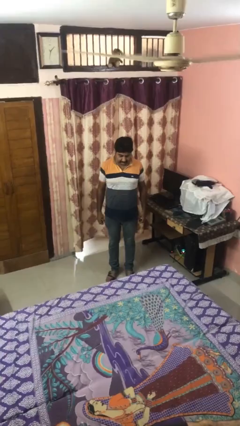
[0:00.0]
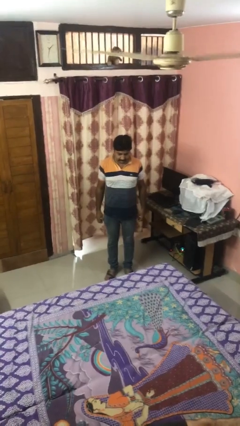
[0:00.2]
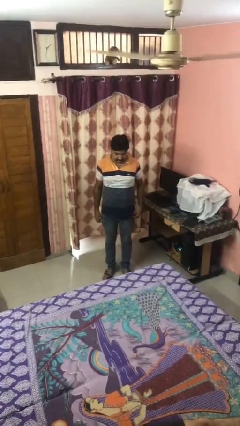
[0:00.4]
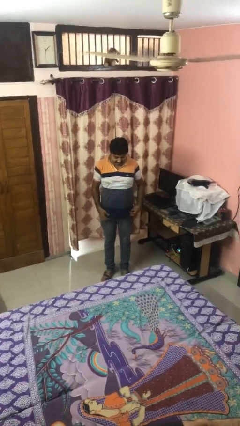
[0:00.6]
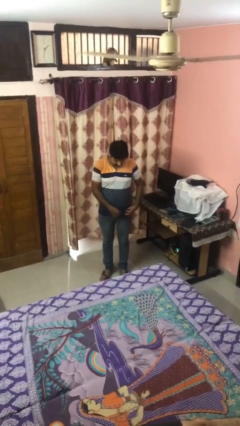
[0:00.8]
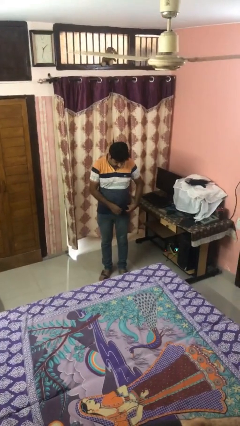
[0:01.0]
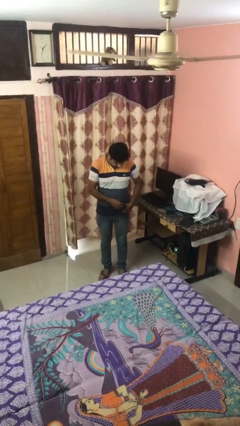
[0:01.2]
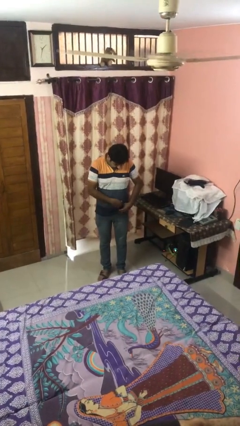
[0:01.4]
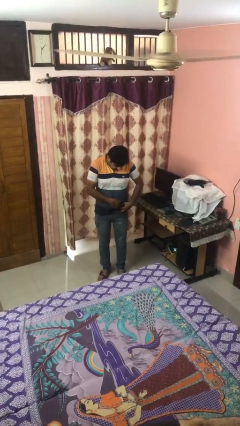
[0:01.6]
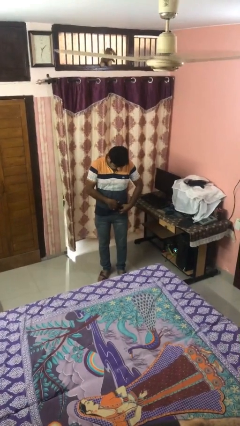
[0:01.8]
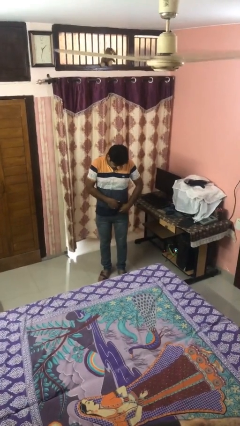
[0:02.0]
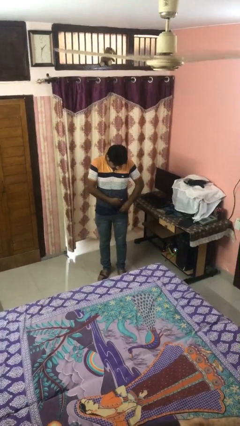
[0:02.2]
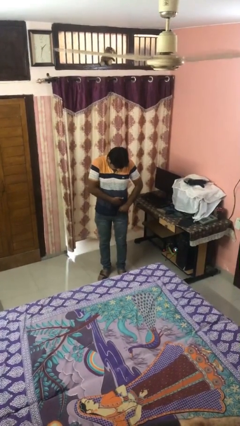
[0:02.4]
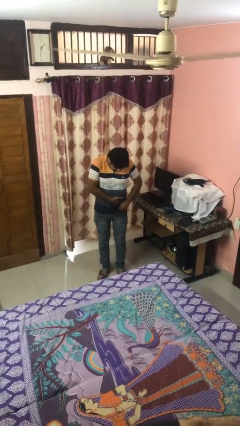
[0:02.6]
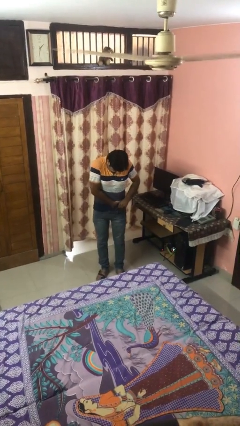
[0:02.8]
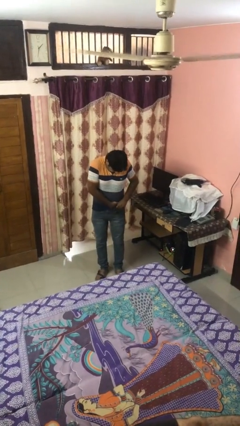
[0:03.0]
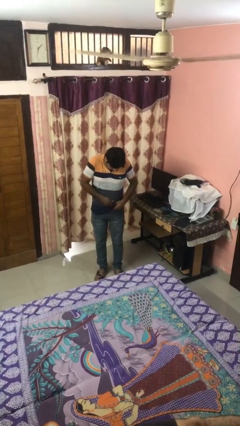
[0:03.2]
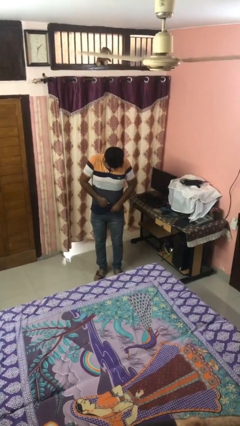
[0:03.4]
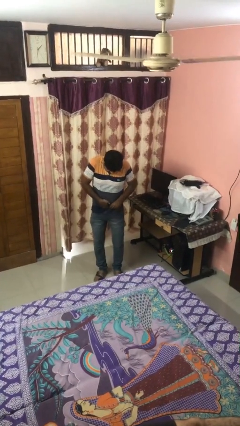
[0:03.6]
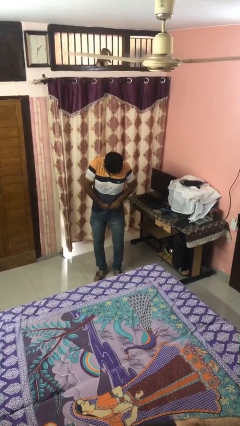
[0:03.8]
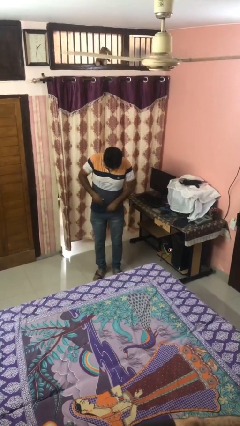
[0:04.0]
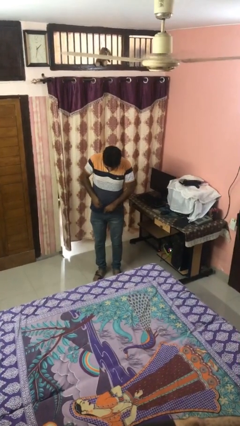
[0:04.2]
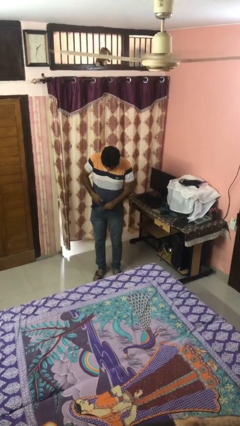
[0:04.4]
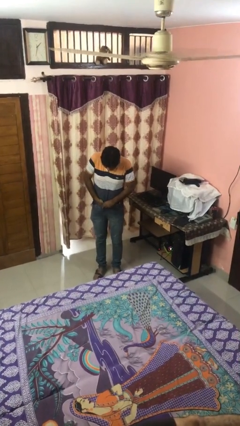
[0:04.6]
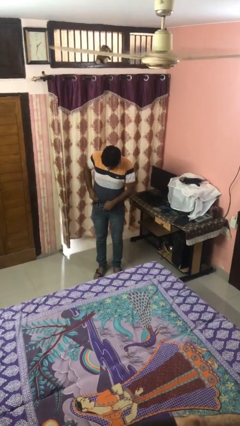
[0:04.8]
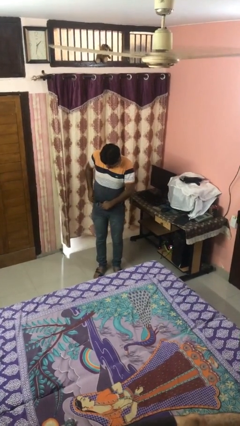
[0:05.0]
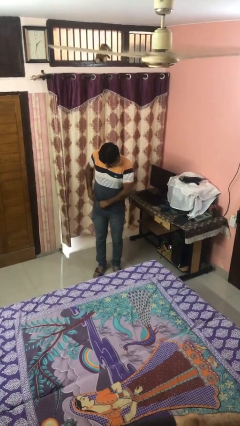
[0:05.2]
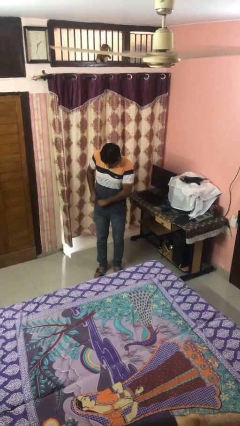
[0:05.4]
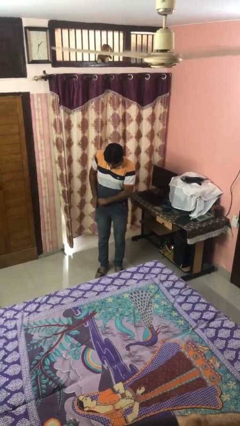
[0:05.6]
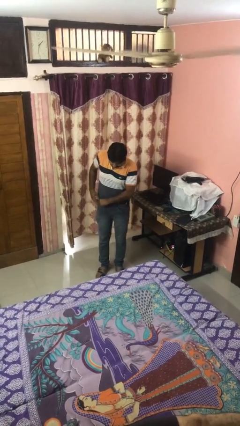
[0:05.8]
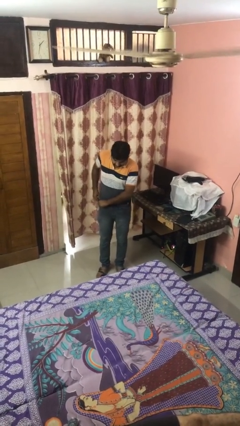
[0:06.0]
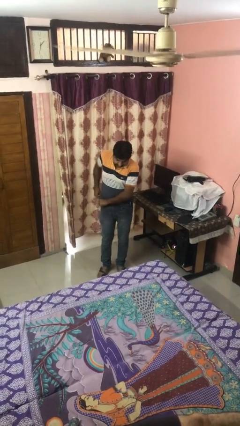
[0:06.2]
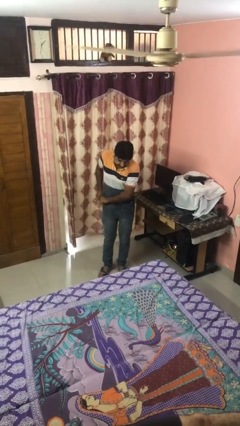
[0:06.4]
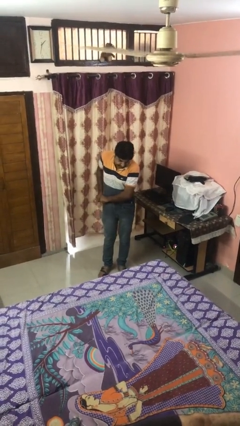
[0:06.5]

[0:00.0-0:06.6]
person tucks in shirt

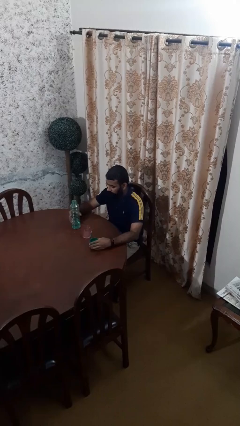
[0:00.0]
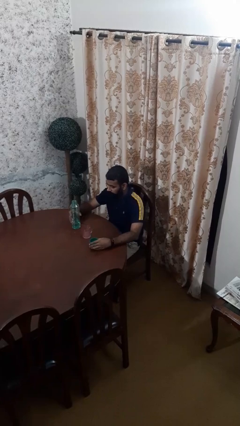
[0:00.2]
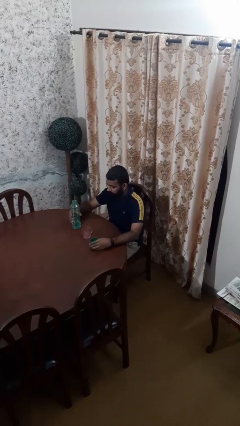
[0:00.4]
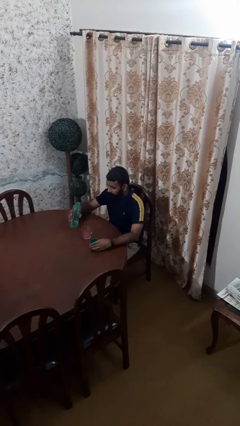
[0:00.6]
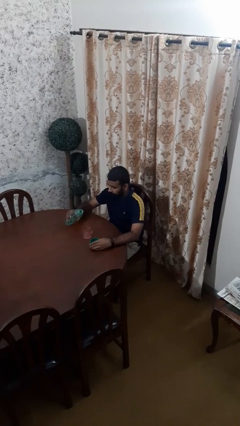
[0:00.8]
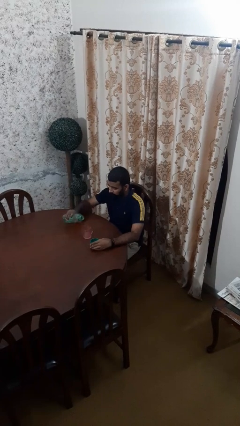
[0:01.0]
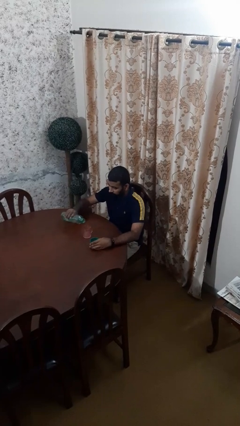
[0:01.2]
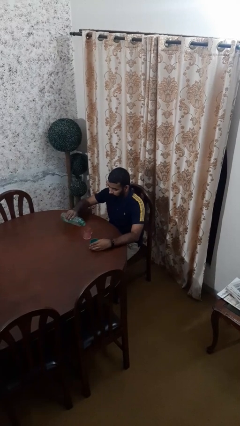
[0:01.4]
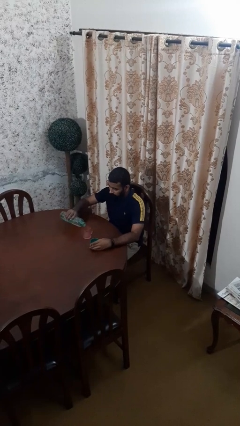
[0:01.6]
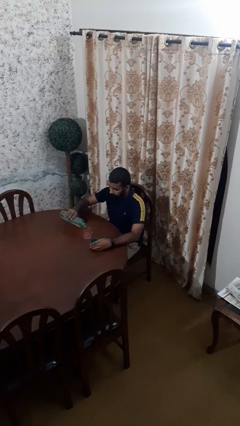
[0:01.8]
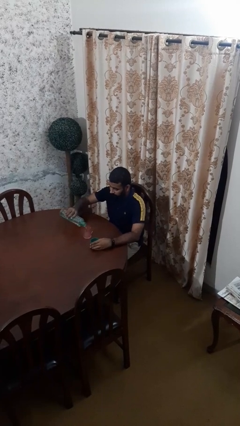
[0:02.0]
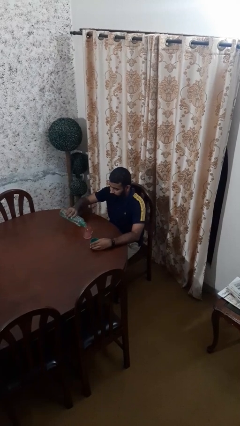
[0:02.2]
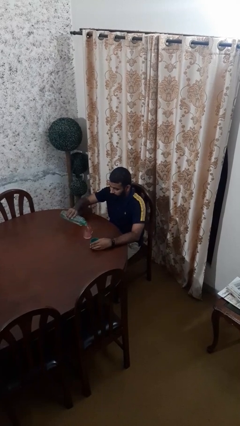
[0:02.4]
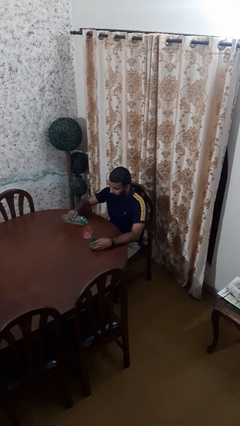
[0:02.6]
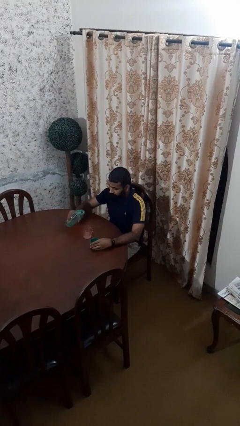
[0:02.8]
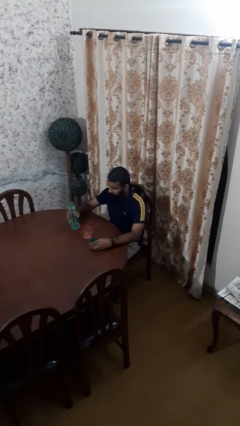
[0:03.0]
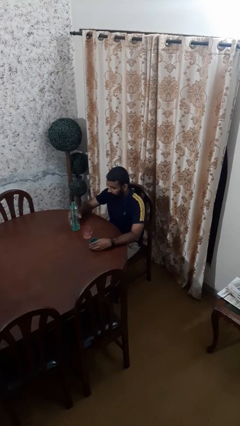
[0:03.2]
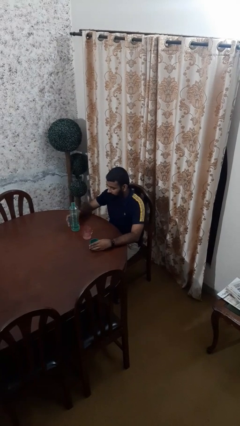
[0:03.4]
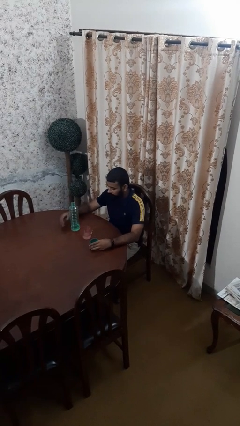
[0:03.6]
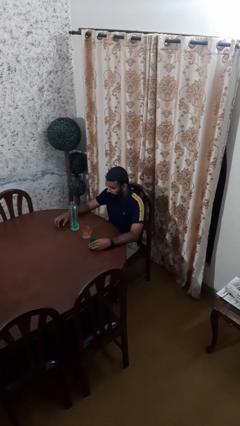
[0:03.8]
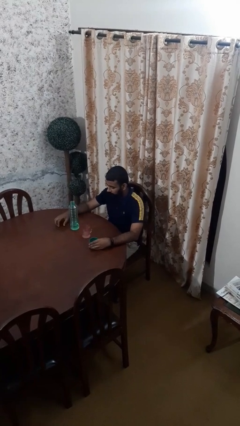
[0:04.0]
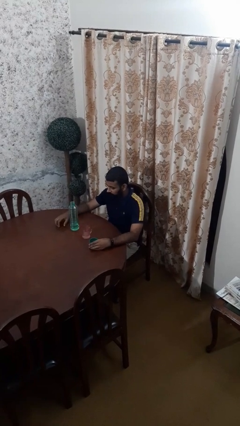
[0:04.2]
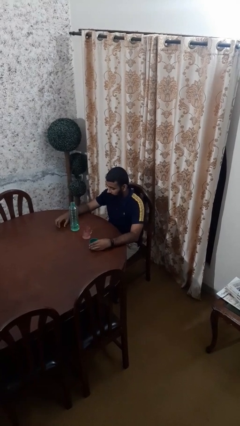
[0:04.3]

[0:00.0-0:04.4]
person pours liquid into cup

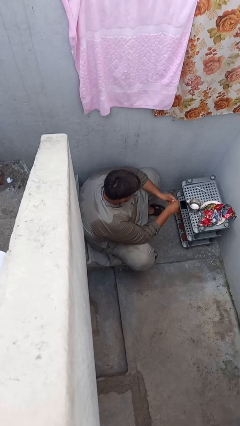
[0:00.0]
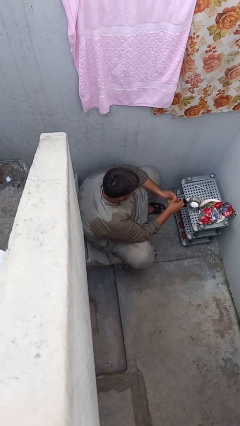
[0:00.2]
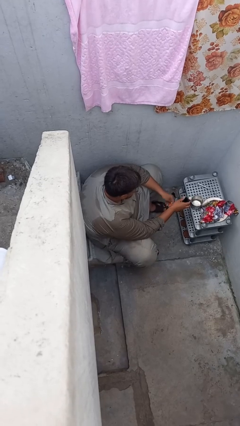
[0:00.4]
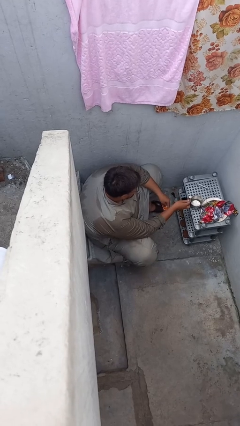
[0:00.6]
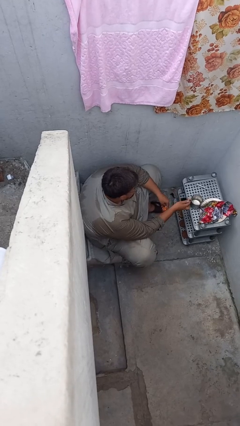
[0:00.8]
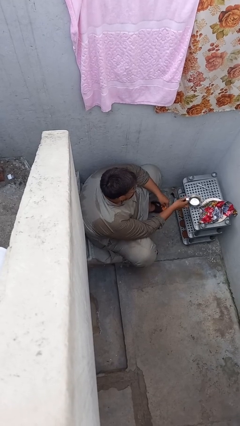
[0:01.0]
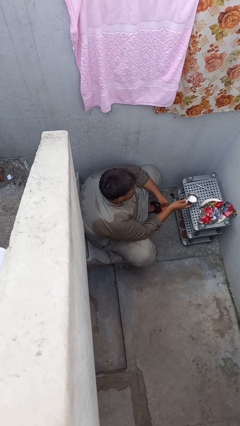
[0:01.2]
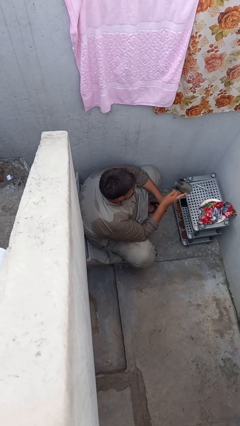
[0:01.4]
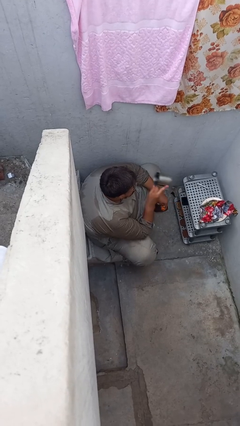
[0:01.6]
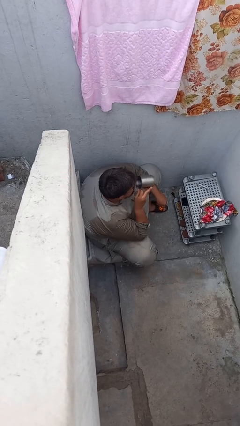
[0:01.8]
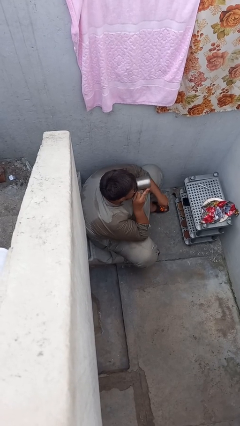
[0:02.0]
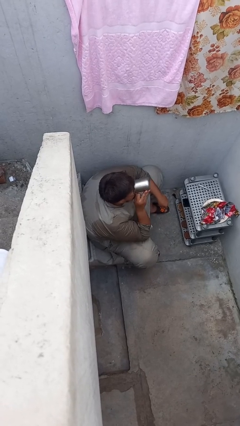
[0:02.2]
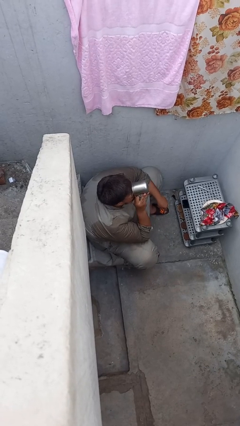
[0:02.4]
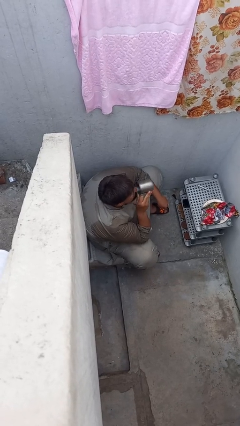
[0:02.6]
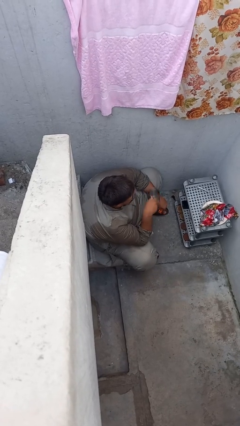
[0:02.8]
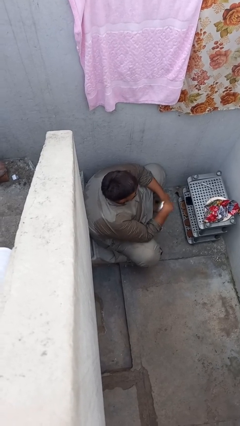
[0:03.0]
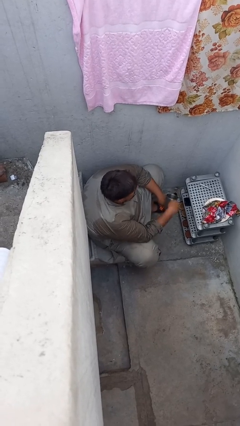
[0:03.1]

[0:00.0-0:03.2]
person drinks from cup

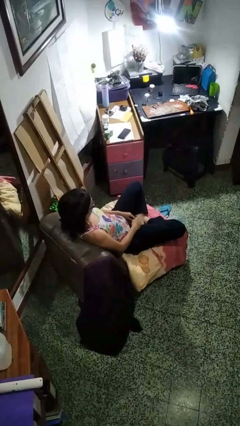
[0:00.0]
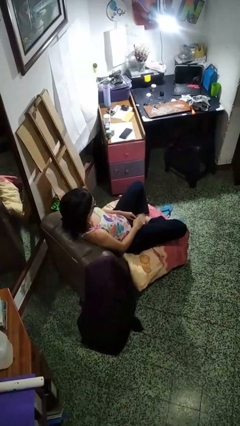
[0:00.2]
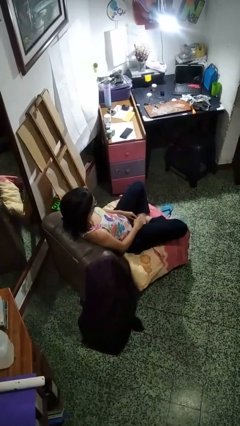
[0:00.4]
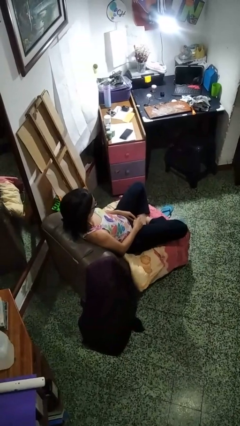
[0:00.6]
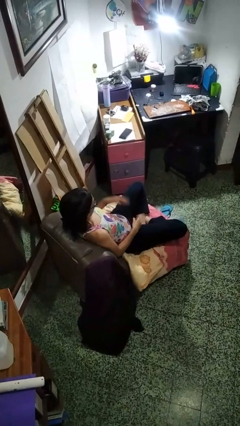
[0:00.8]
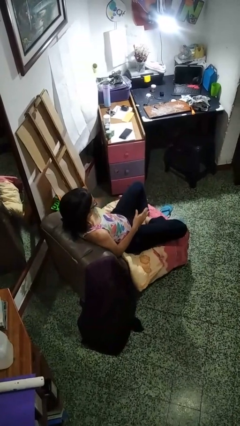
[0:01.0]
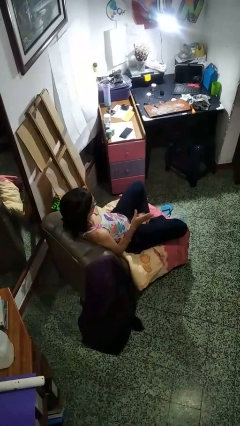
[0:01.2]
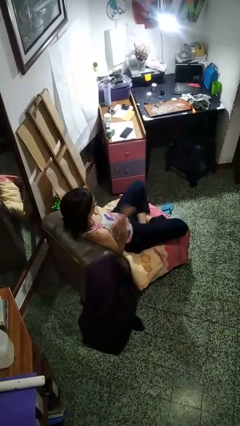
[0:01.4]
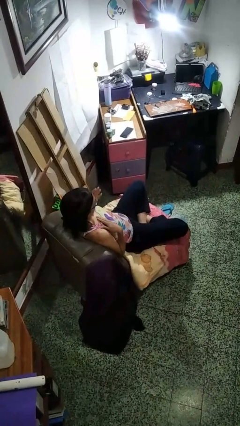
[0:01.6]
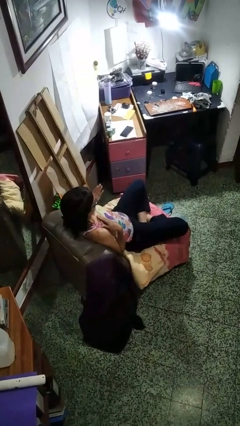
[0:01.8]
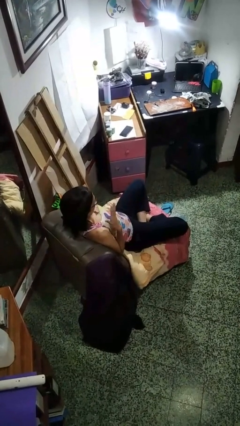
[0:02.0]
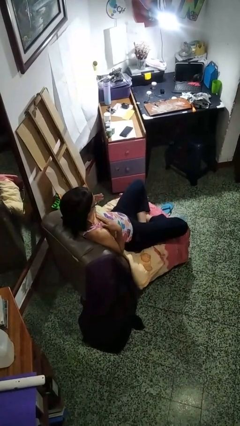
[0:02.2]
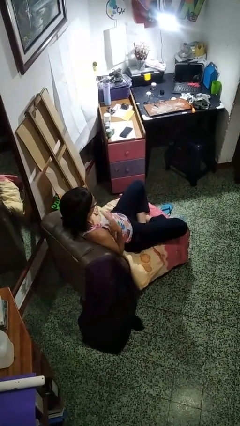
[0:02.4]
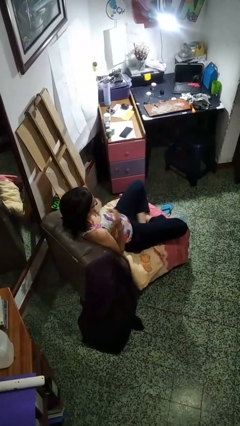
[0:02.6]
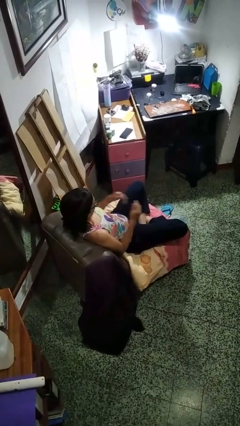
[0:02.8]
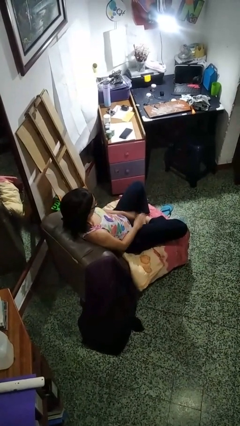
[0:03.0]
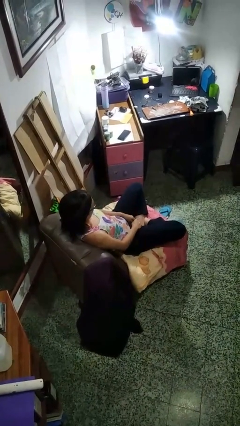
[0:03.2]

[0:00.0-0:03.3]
person drums on chest
